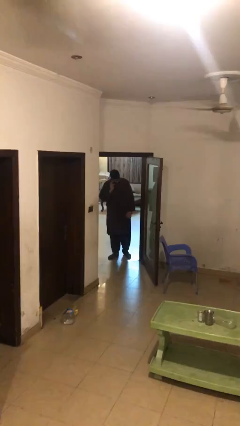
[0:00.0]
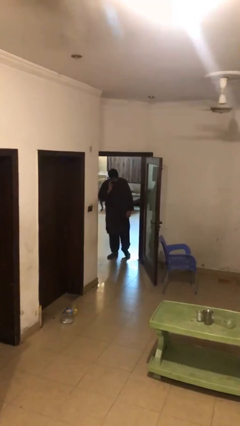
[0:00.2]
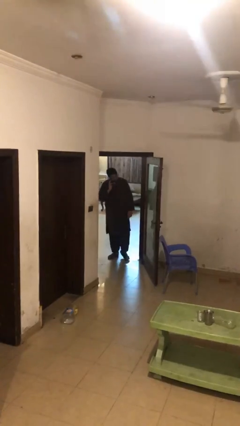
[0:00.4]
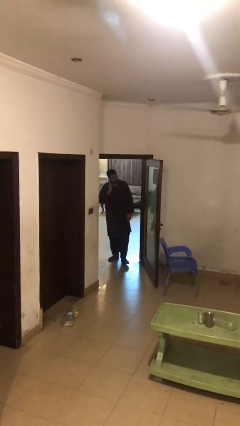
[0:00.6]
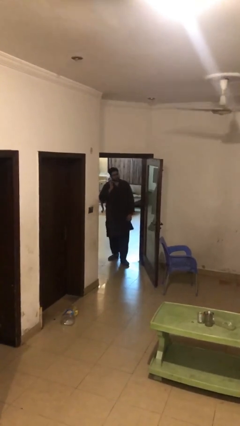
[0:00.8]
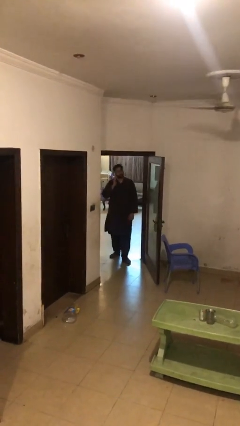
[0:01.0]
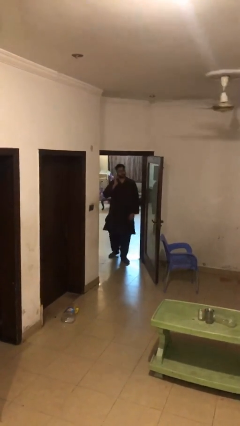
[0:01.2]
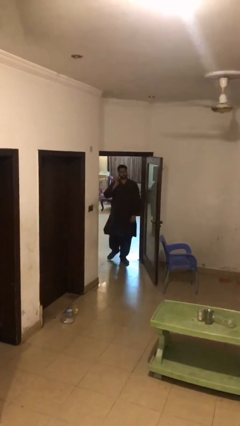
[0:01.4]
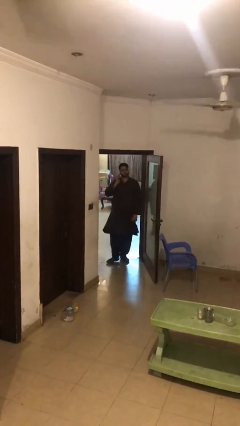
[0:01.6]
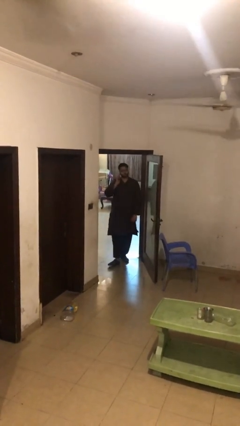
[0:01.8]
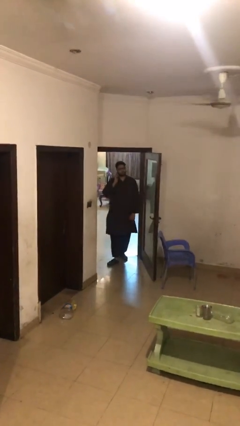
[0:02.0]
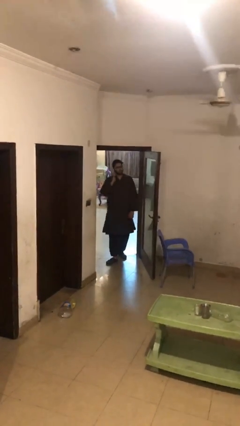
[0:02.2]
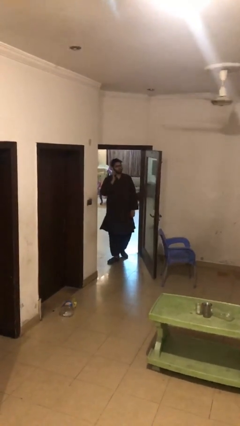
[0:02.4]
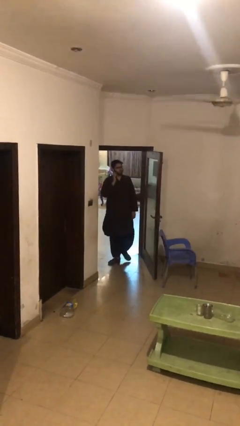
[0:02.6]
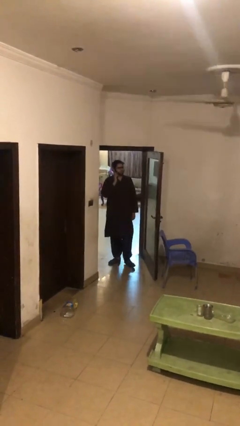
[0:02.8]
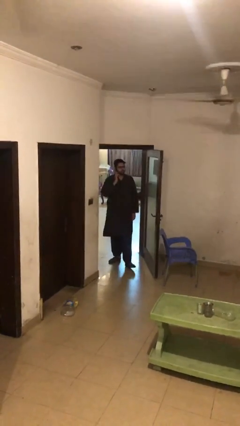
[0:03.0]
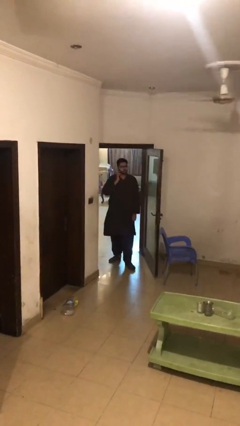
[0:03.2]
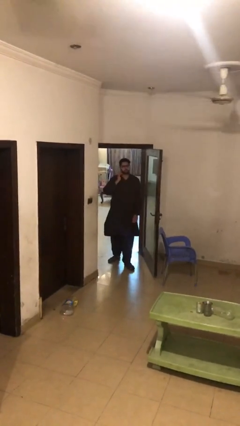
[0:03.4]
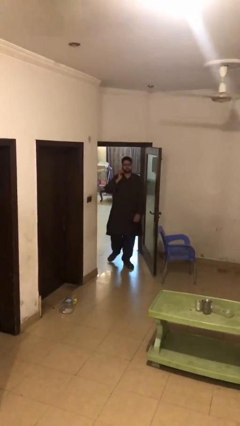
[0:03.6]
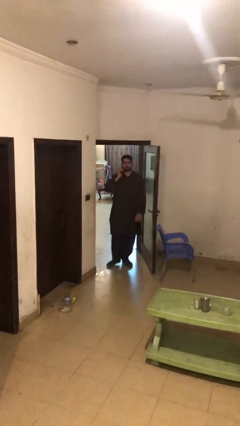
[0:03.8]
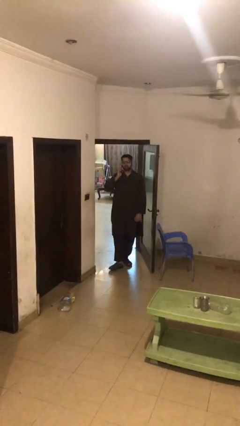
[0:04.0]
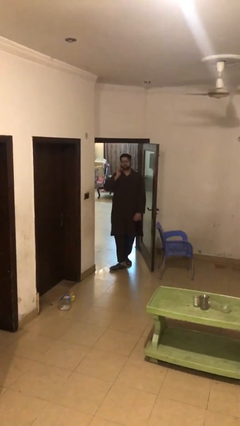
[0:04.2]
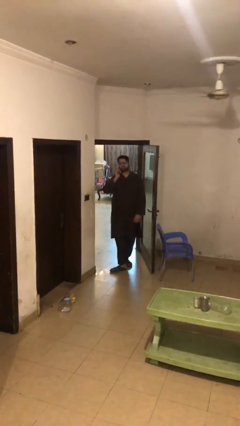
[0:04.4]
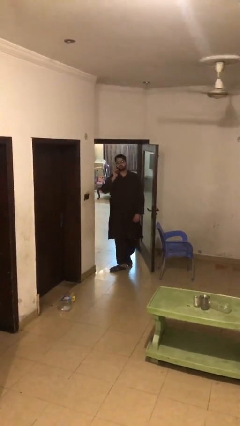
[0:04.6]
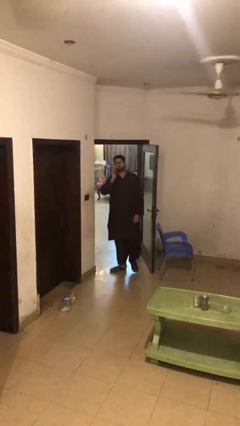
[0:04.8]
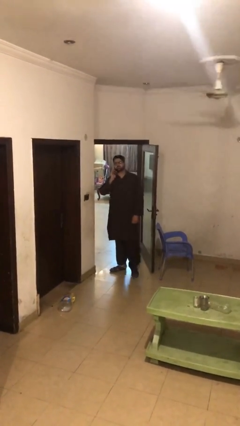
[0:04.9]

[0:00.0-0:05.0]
person enters scene through structure

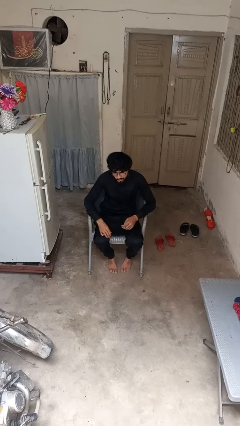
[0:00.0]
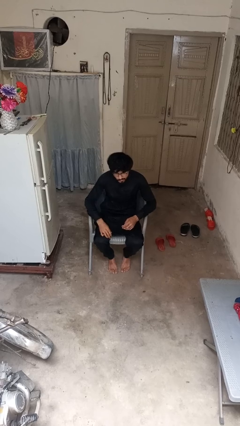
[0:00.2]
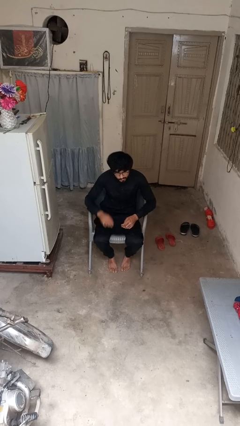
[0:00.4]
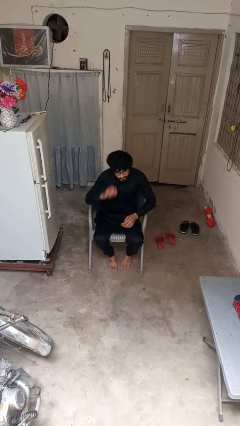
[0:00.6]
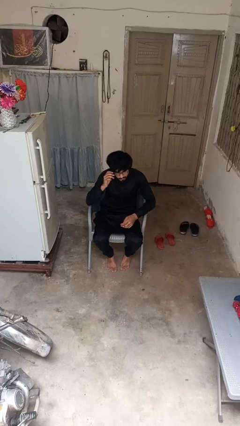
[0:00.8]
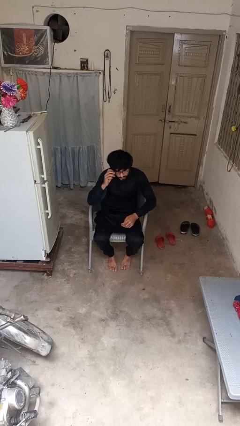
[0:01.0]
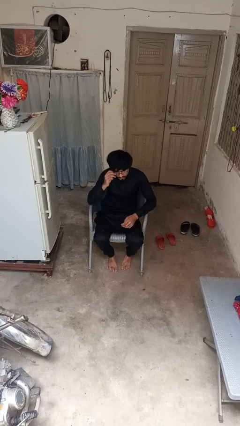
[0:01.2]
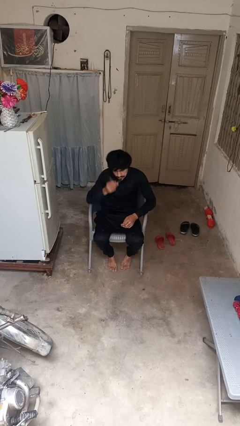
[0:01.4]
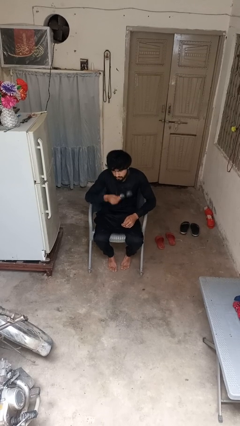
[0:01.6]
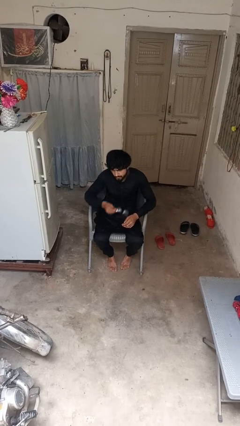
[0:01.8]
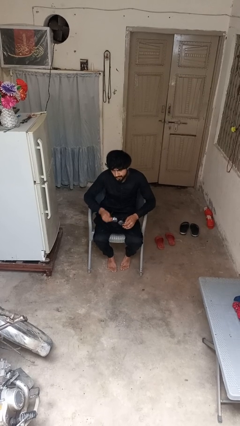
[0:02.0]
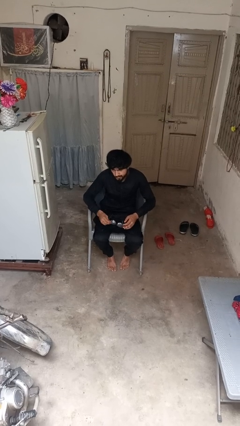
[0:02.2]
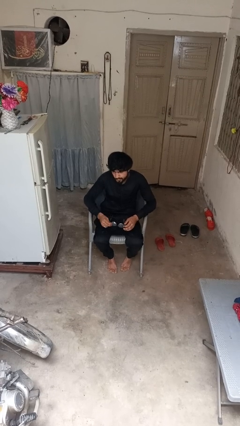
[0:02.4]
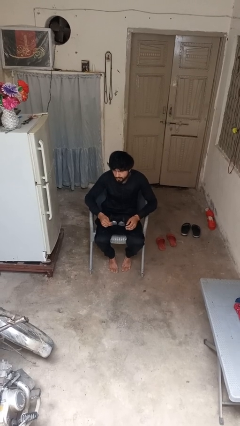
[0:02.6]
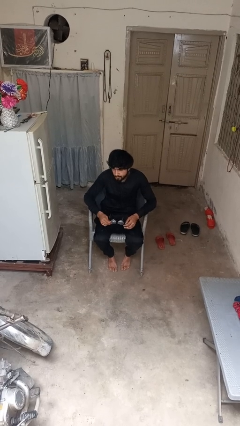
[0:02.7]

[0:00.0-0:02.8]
person takes off glasses

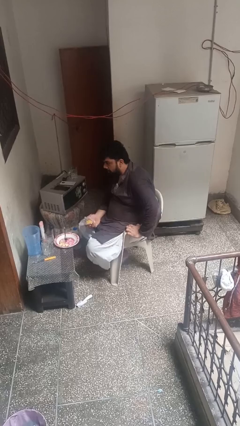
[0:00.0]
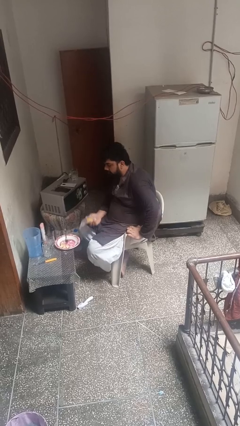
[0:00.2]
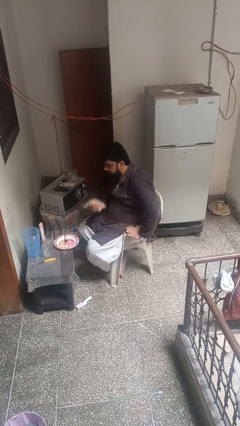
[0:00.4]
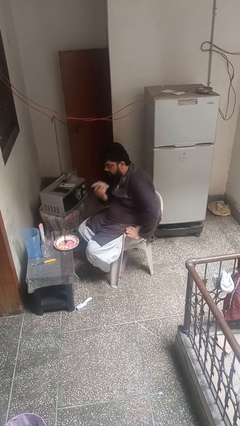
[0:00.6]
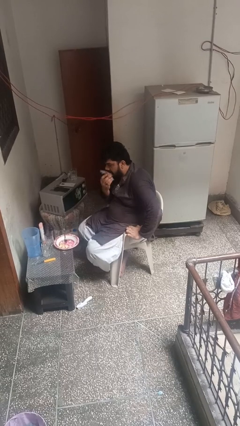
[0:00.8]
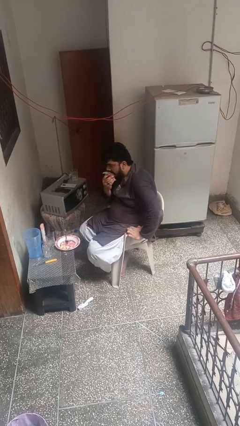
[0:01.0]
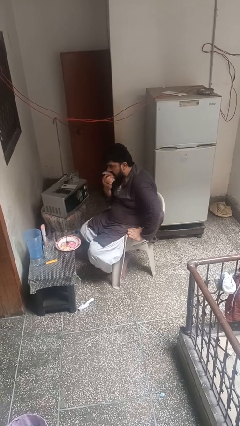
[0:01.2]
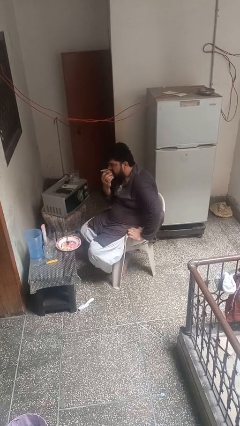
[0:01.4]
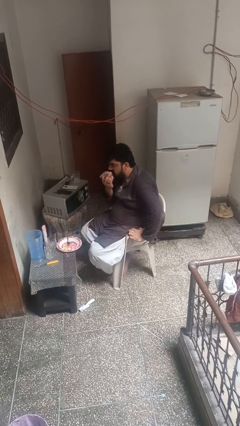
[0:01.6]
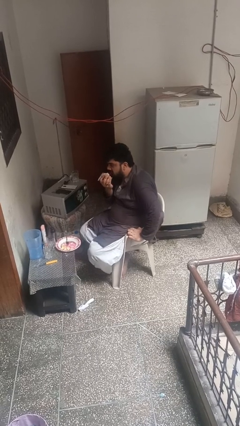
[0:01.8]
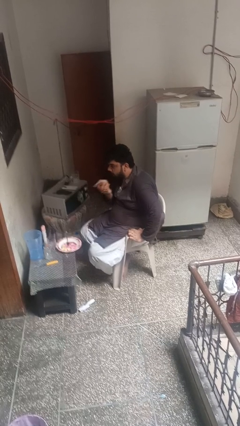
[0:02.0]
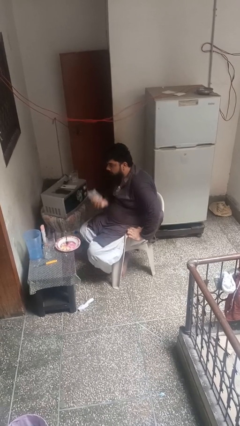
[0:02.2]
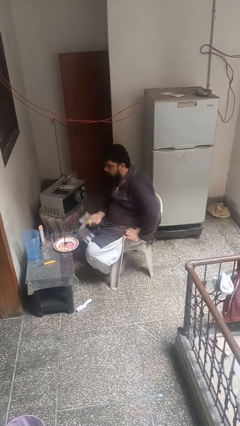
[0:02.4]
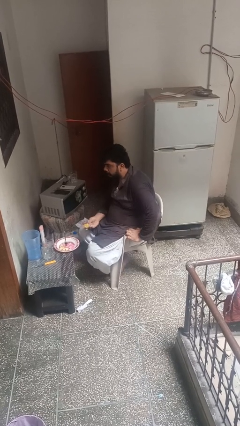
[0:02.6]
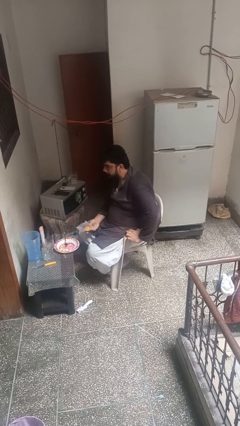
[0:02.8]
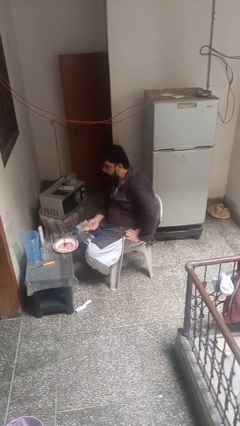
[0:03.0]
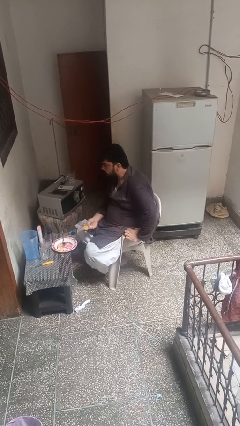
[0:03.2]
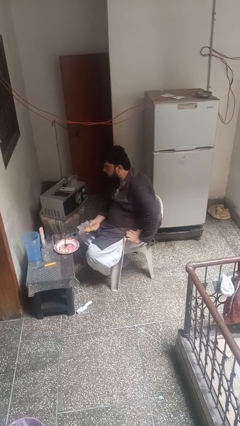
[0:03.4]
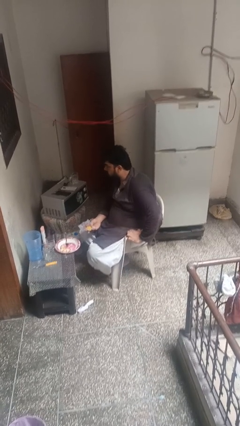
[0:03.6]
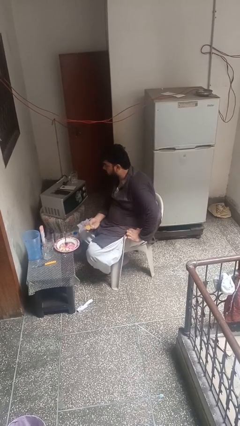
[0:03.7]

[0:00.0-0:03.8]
person eats with hands

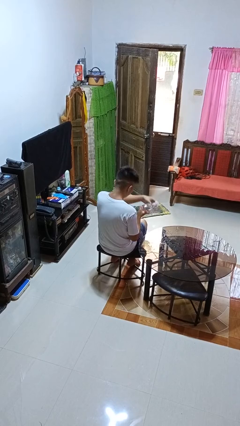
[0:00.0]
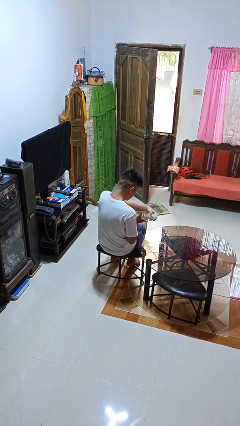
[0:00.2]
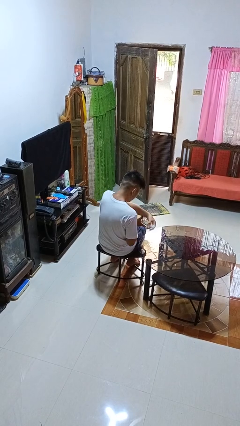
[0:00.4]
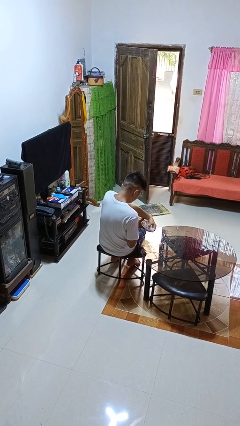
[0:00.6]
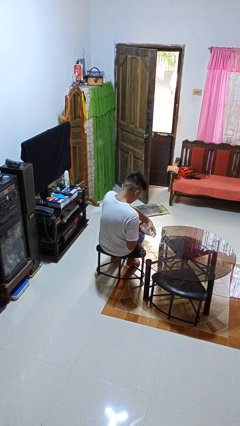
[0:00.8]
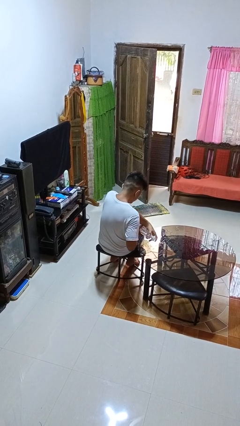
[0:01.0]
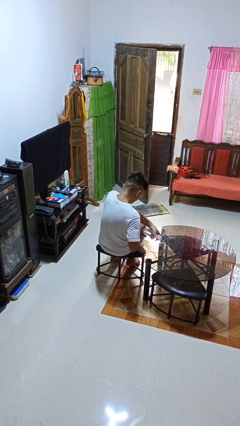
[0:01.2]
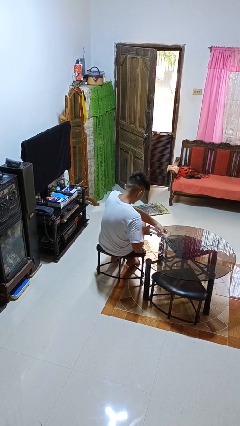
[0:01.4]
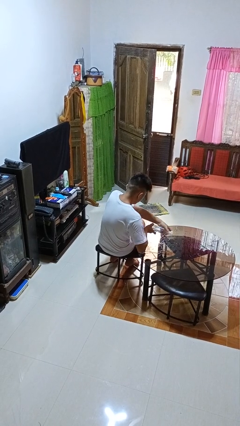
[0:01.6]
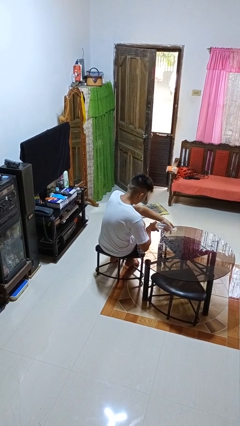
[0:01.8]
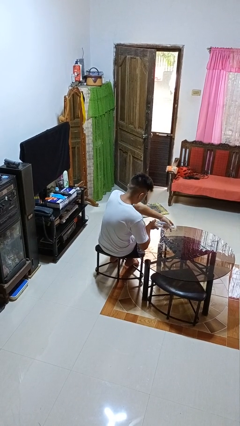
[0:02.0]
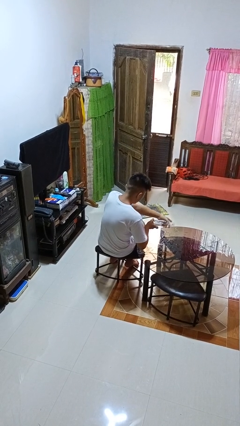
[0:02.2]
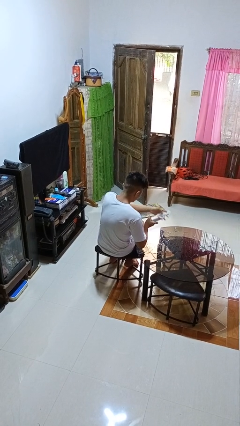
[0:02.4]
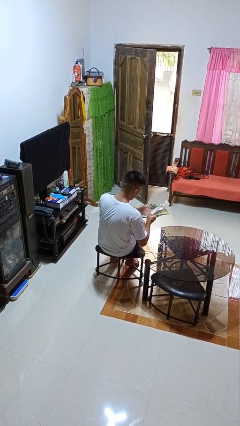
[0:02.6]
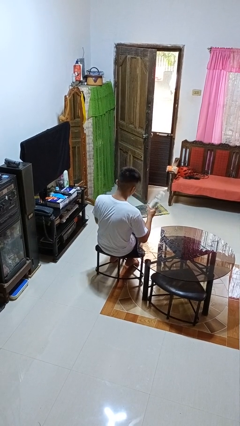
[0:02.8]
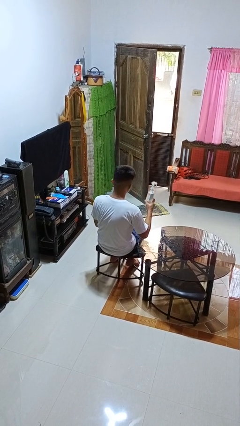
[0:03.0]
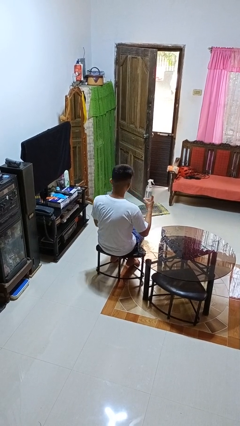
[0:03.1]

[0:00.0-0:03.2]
person sprays from bottle

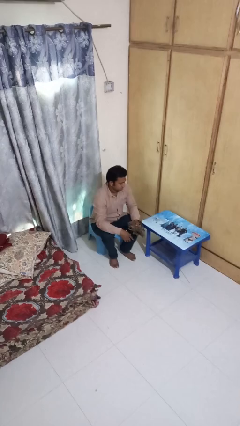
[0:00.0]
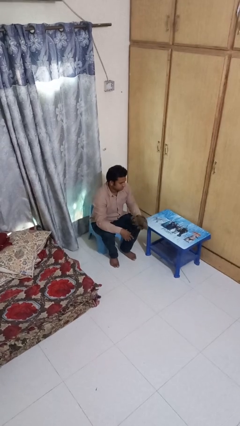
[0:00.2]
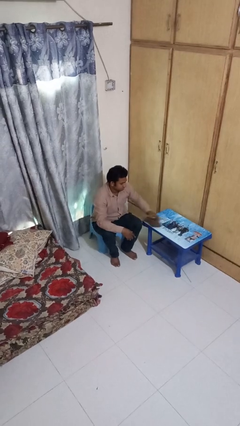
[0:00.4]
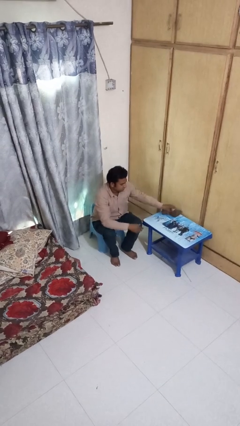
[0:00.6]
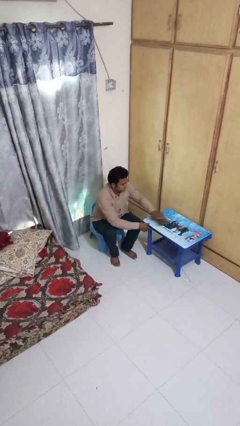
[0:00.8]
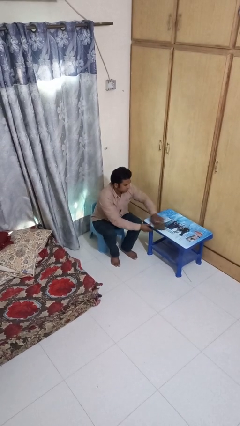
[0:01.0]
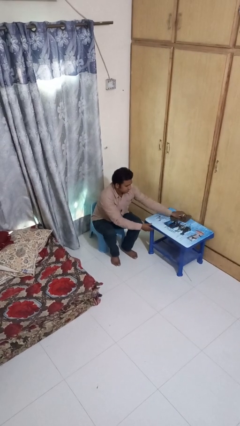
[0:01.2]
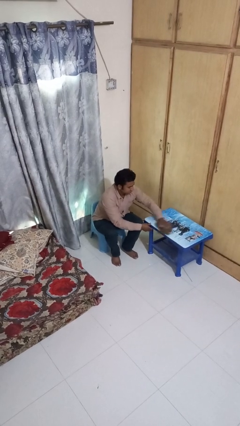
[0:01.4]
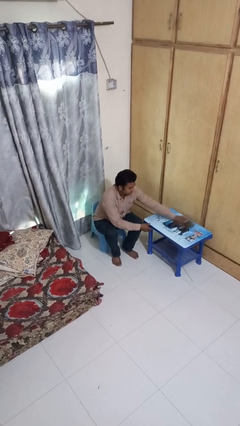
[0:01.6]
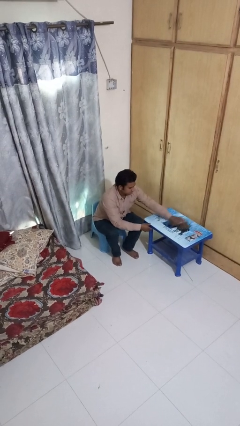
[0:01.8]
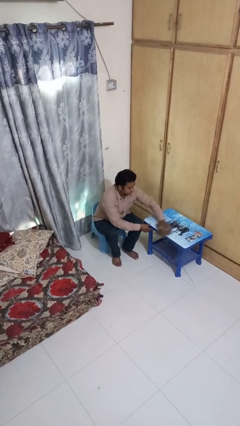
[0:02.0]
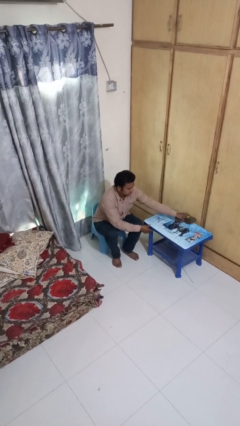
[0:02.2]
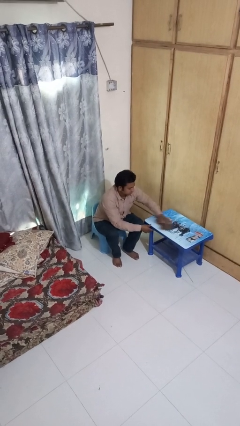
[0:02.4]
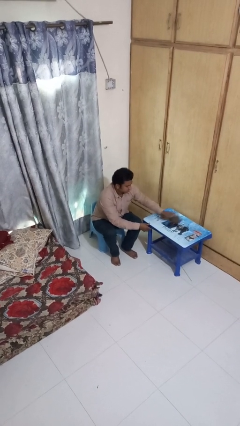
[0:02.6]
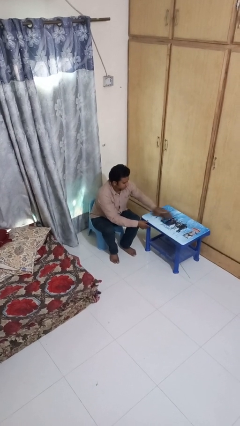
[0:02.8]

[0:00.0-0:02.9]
person cleans table with rag
